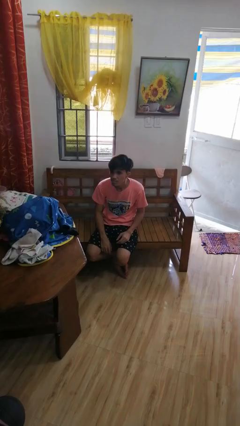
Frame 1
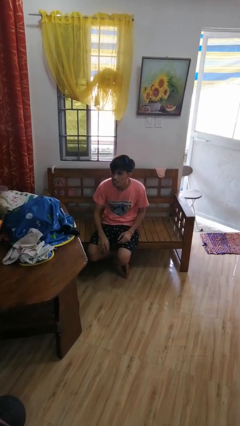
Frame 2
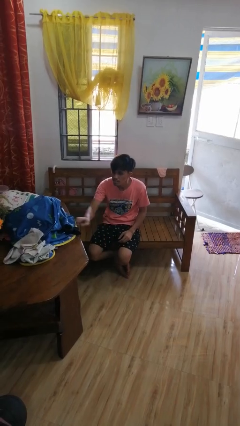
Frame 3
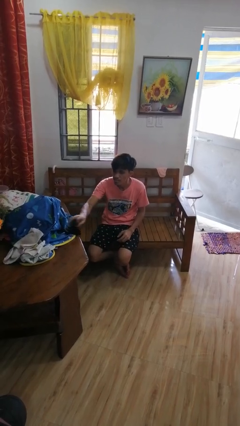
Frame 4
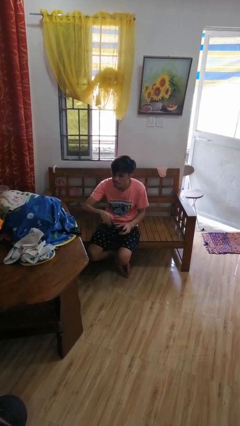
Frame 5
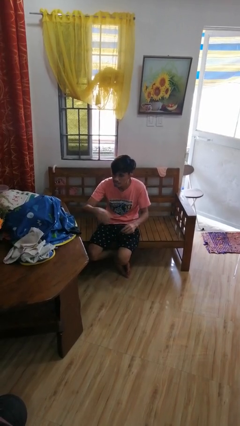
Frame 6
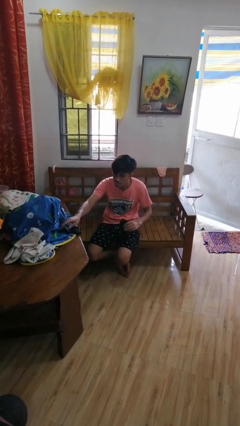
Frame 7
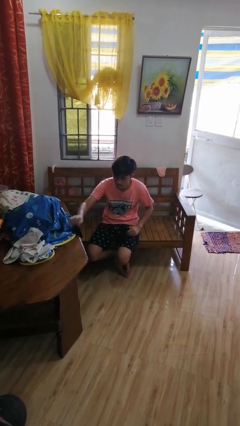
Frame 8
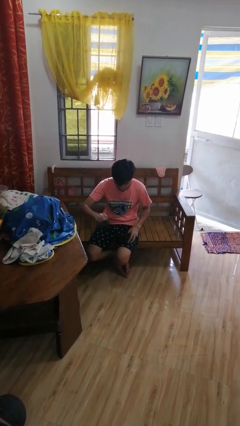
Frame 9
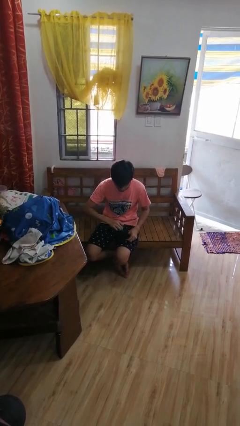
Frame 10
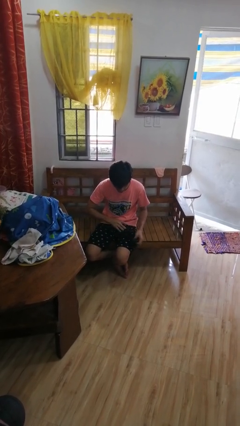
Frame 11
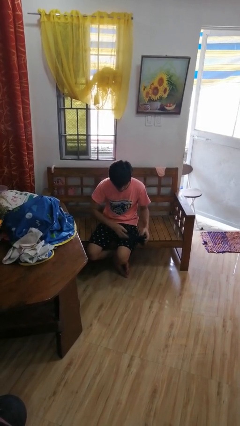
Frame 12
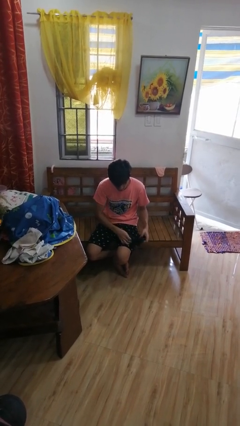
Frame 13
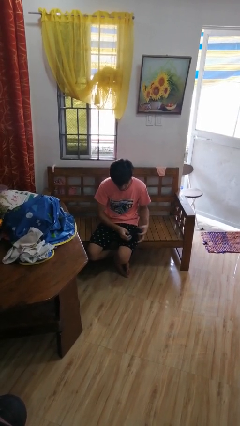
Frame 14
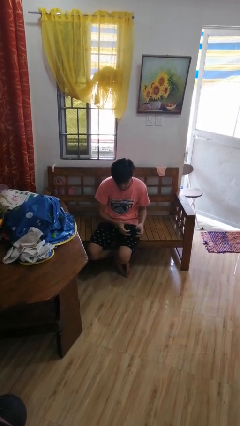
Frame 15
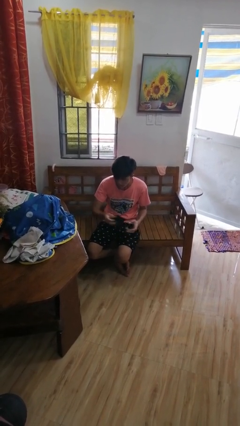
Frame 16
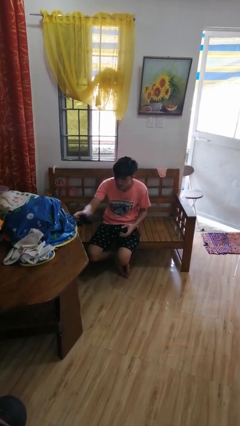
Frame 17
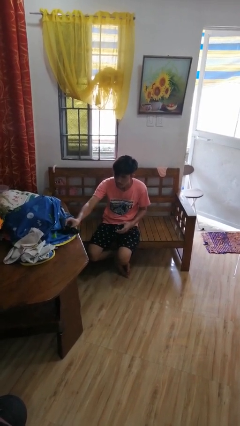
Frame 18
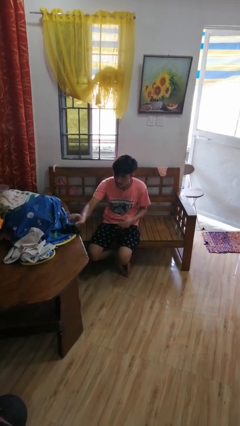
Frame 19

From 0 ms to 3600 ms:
person folds socks

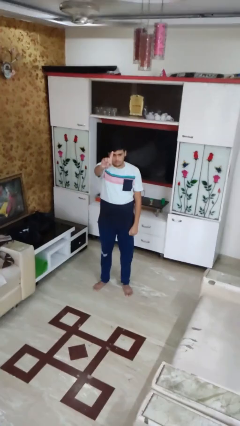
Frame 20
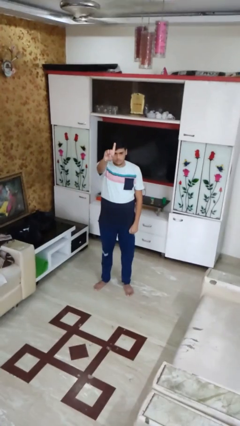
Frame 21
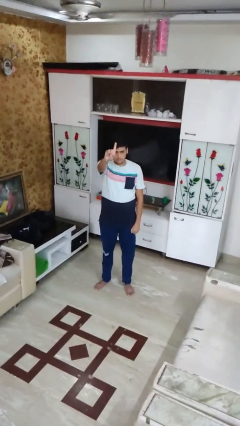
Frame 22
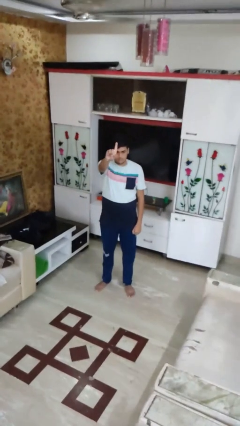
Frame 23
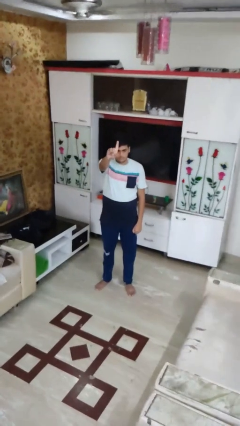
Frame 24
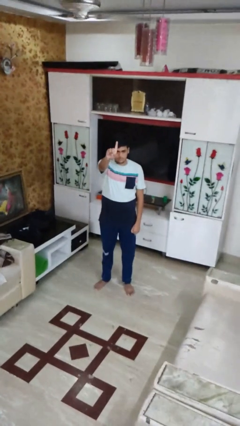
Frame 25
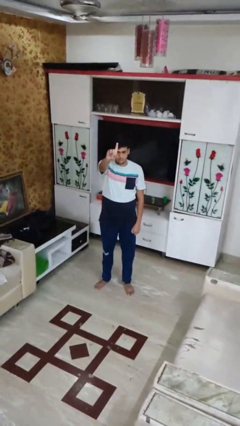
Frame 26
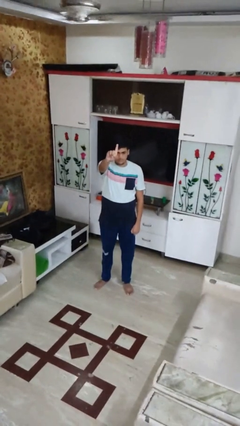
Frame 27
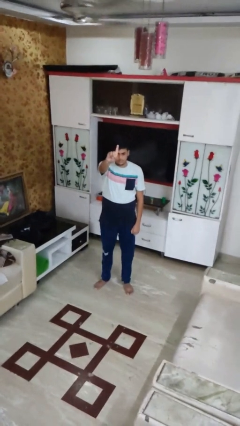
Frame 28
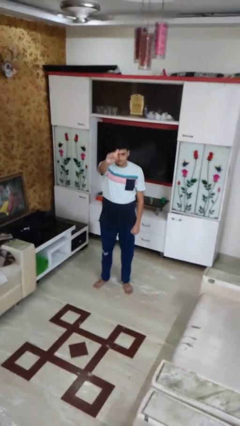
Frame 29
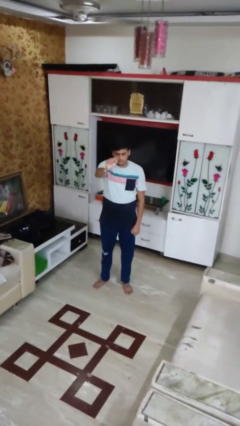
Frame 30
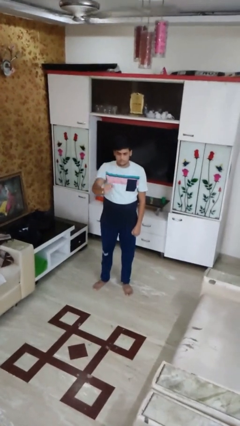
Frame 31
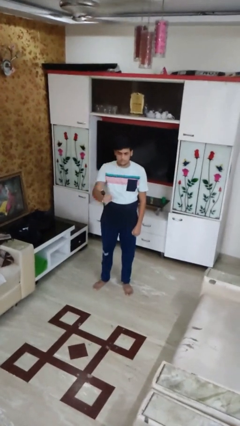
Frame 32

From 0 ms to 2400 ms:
person gestures number one

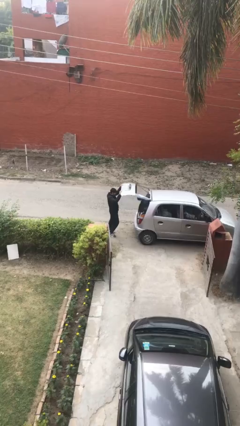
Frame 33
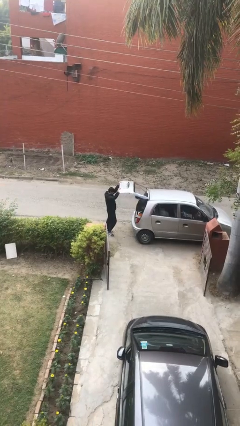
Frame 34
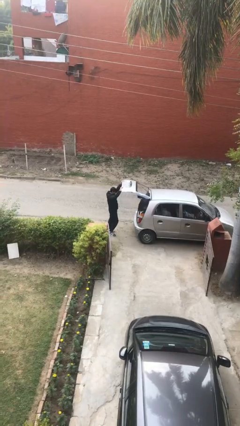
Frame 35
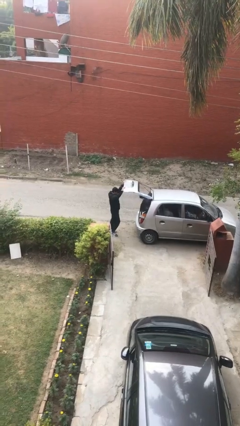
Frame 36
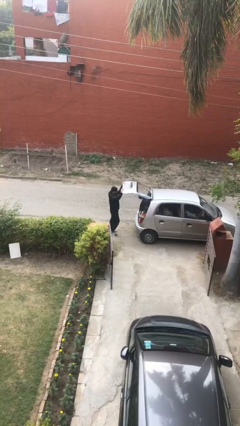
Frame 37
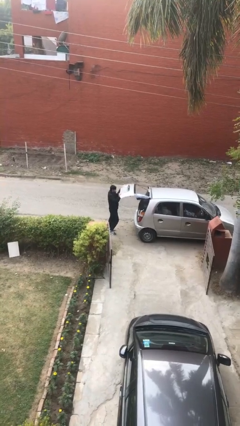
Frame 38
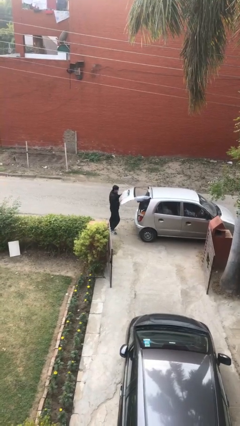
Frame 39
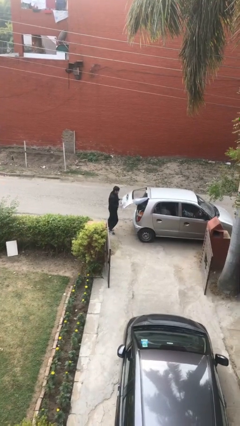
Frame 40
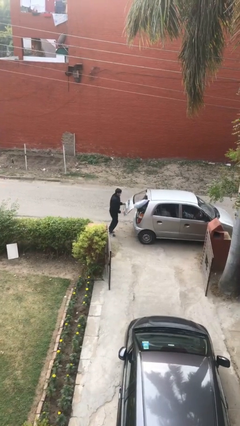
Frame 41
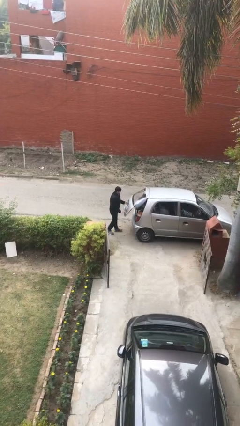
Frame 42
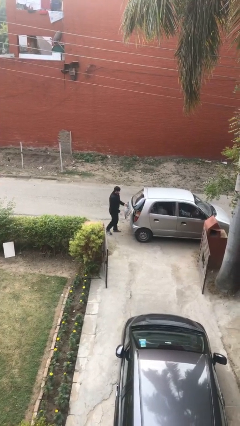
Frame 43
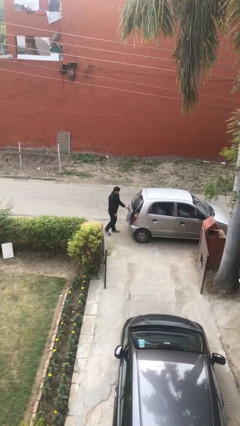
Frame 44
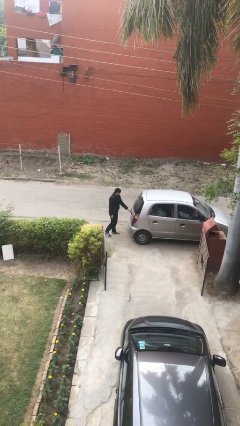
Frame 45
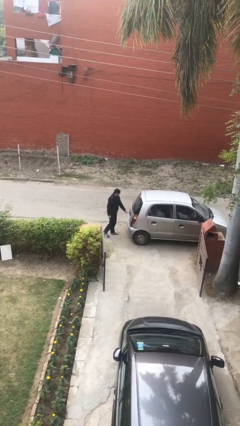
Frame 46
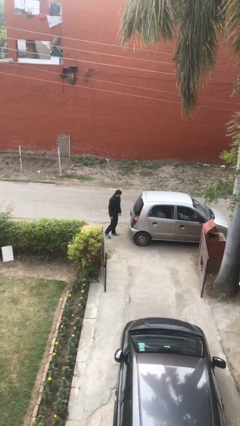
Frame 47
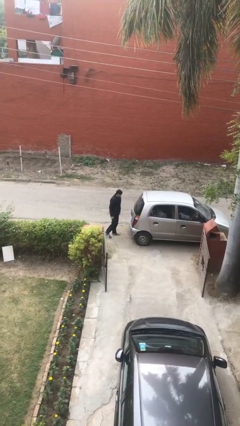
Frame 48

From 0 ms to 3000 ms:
person closes car trunk

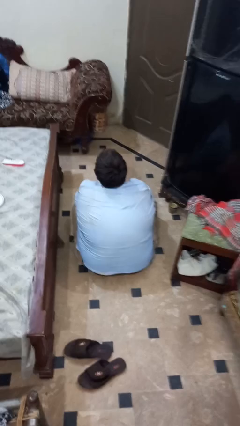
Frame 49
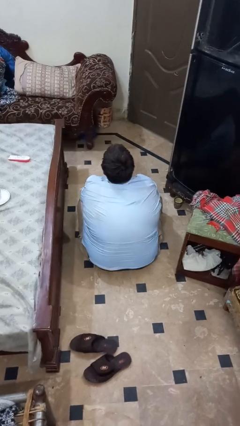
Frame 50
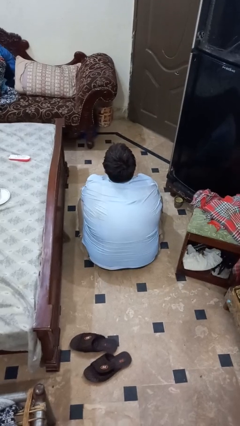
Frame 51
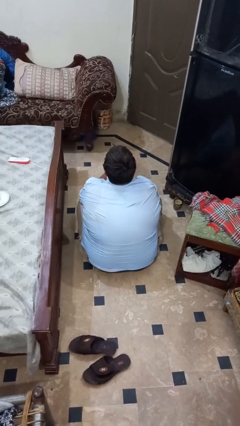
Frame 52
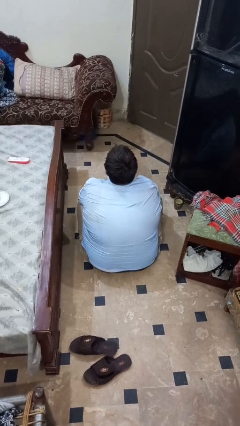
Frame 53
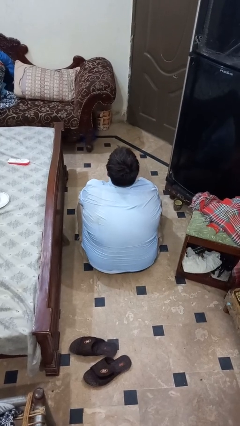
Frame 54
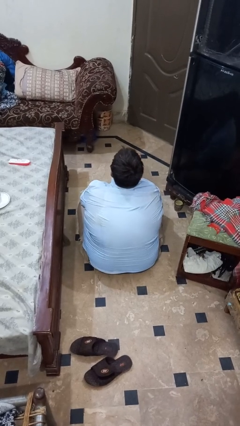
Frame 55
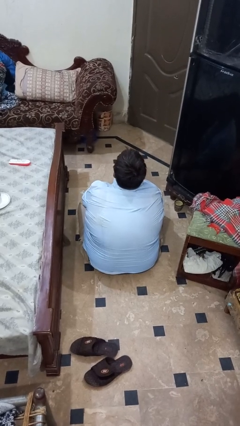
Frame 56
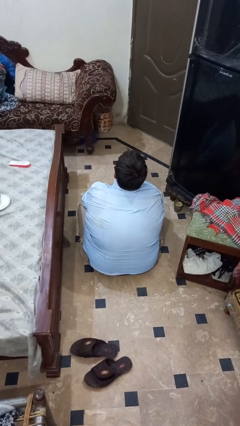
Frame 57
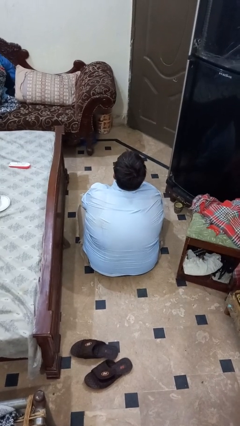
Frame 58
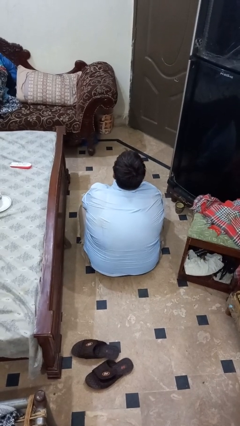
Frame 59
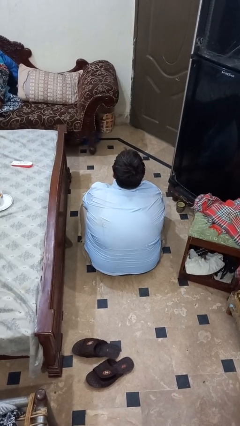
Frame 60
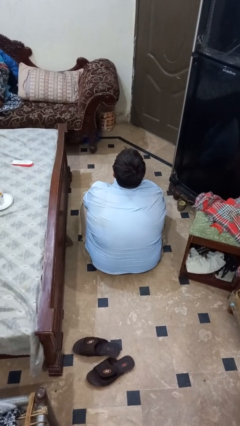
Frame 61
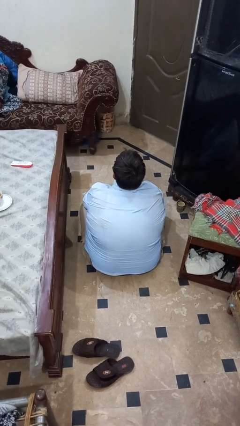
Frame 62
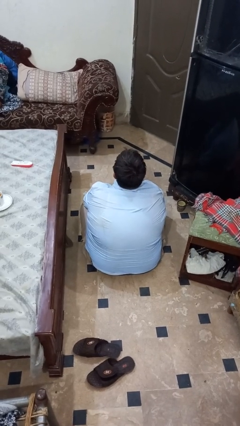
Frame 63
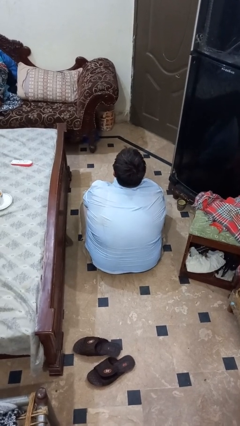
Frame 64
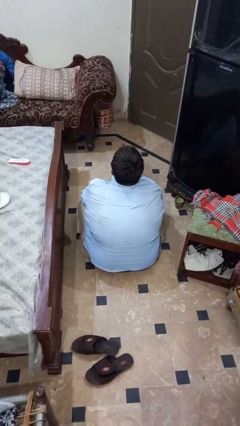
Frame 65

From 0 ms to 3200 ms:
person strokes chin

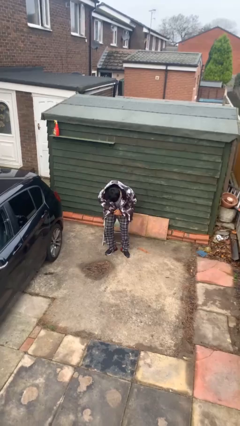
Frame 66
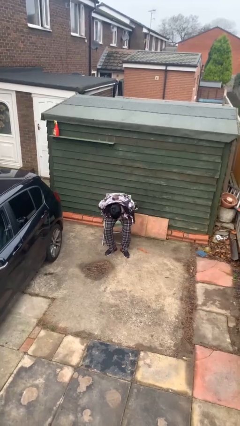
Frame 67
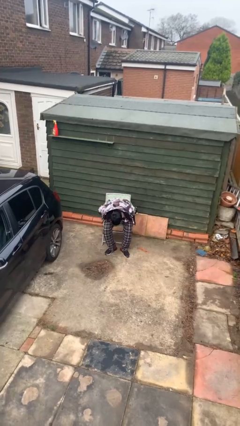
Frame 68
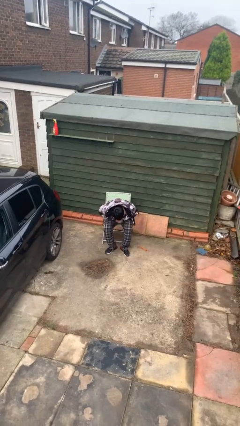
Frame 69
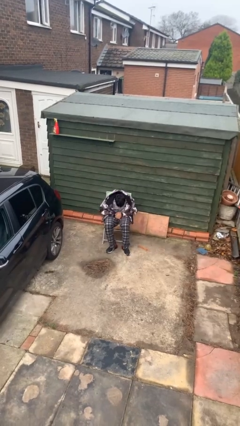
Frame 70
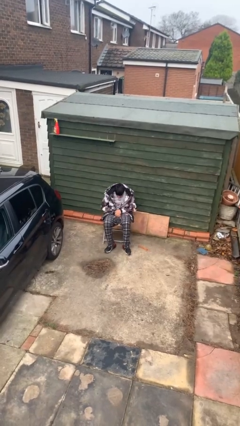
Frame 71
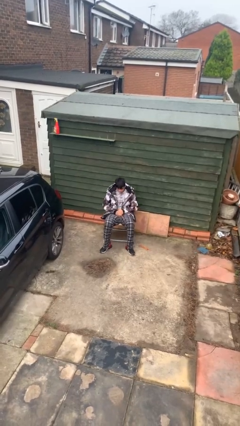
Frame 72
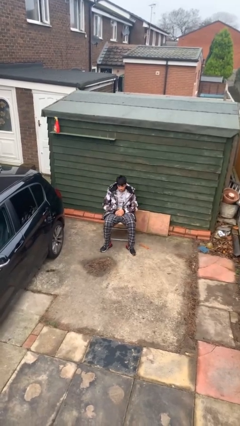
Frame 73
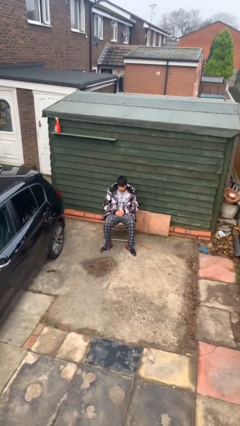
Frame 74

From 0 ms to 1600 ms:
person sits down

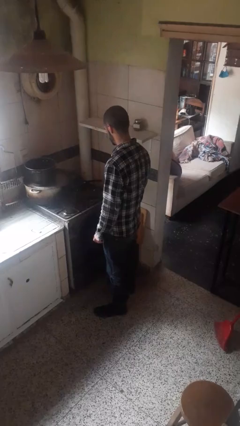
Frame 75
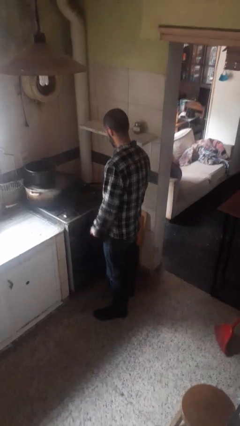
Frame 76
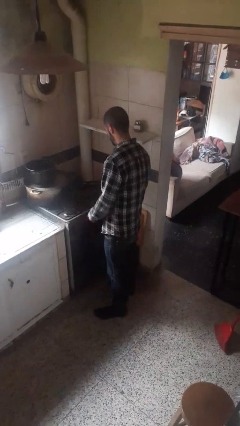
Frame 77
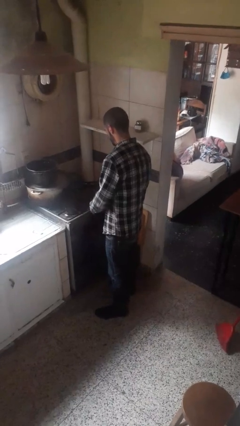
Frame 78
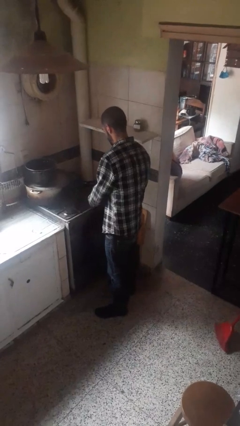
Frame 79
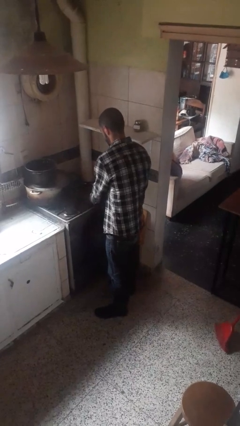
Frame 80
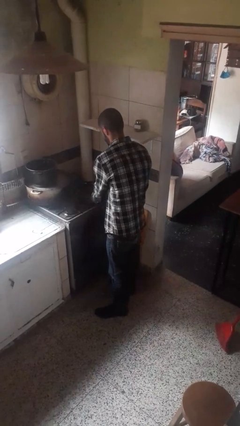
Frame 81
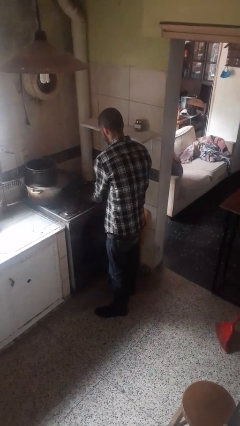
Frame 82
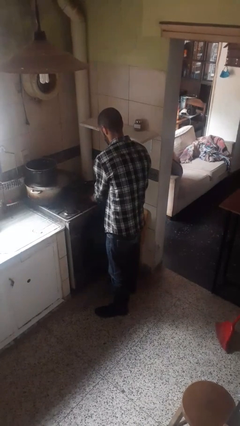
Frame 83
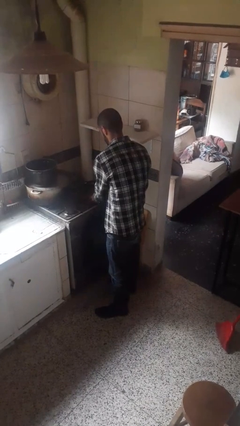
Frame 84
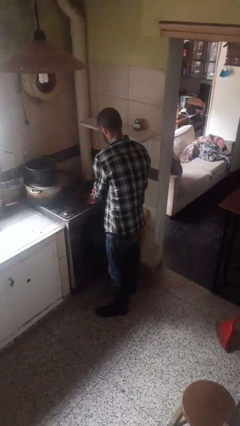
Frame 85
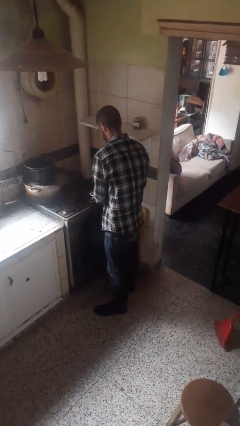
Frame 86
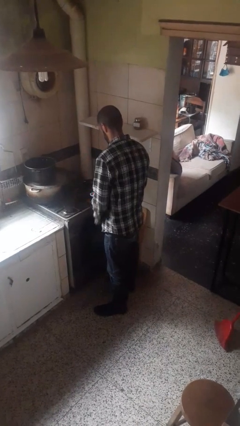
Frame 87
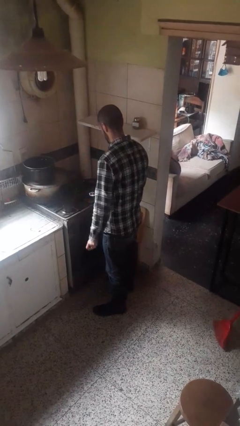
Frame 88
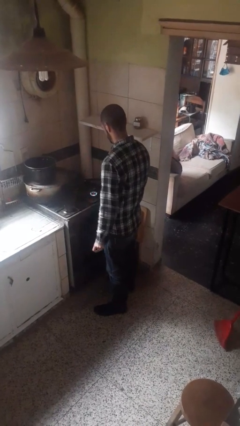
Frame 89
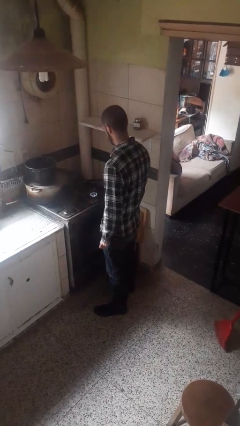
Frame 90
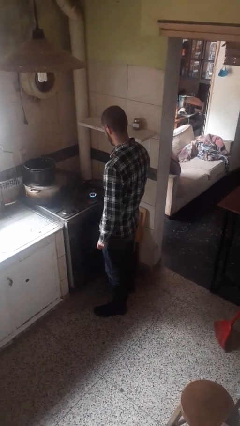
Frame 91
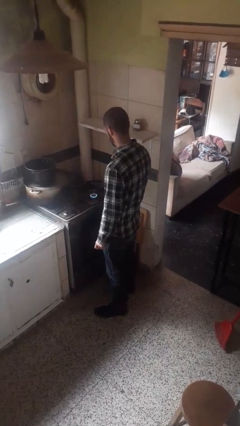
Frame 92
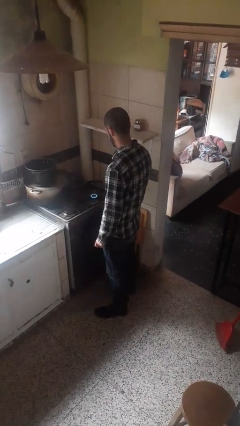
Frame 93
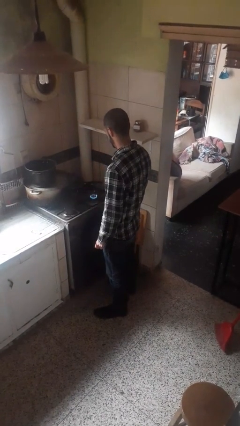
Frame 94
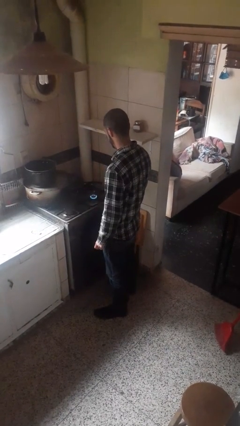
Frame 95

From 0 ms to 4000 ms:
person turns on stovetop
